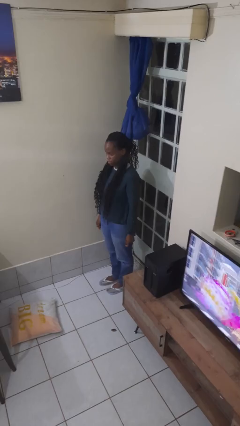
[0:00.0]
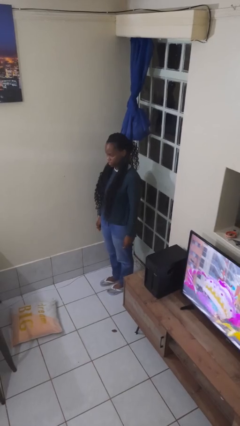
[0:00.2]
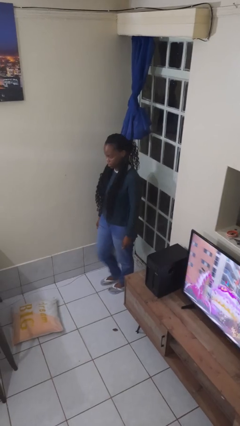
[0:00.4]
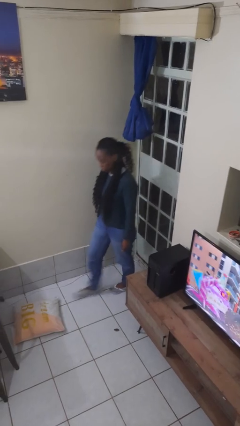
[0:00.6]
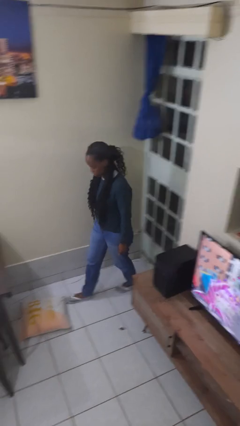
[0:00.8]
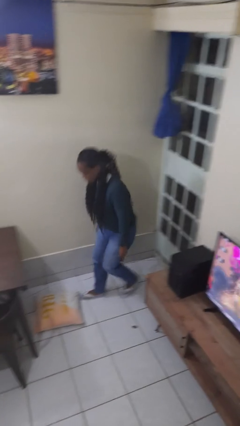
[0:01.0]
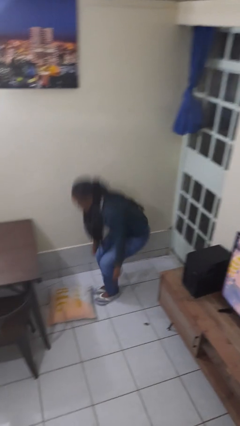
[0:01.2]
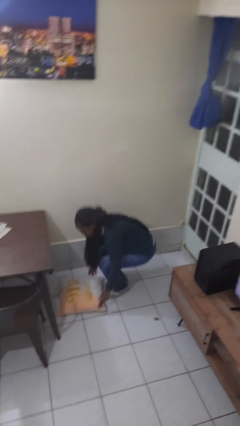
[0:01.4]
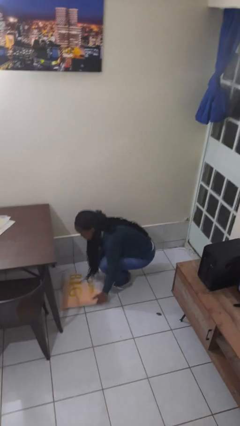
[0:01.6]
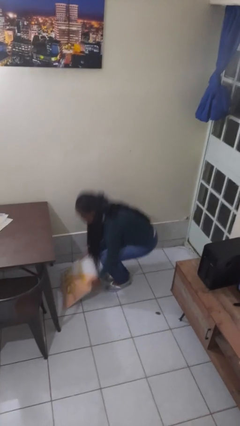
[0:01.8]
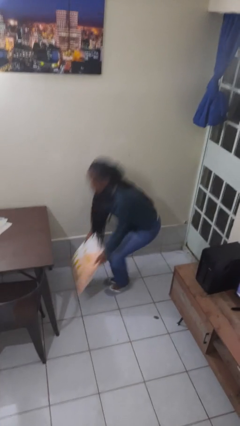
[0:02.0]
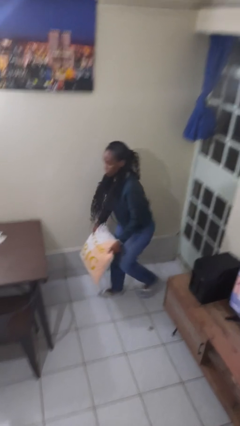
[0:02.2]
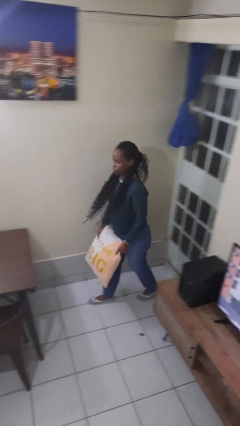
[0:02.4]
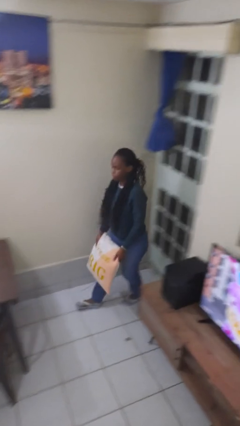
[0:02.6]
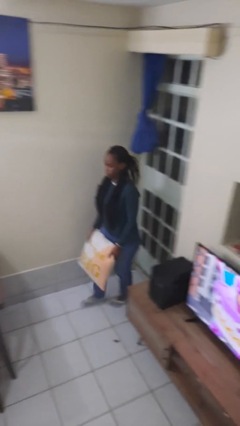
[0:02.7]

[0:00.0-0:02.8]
person picks up object from floor

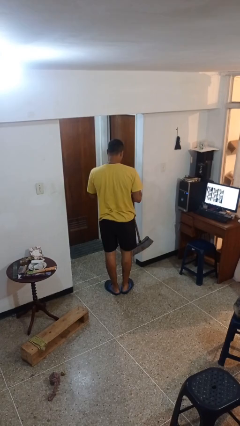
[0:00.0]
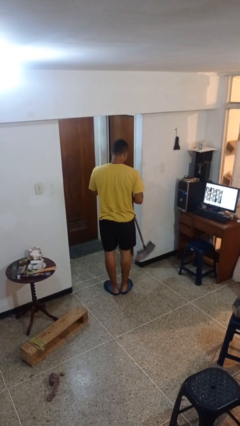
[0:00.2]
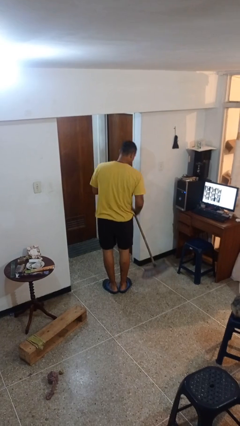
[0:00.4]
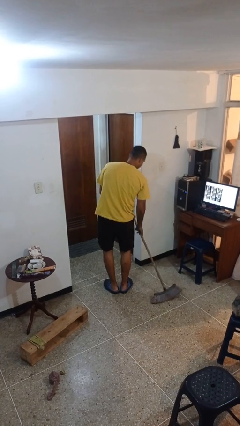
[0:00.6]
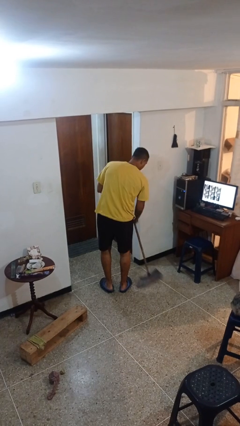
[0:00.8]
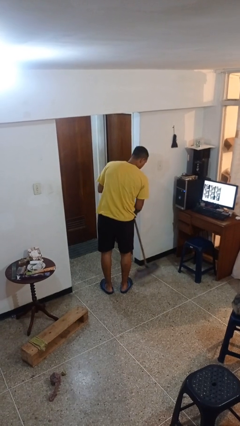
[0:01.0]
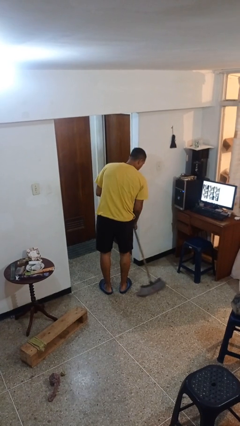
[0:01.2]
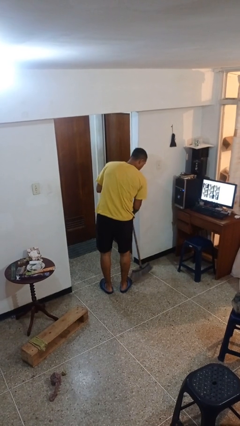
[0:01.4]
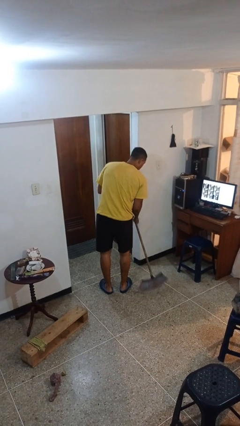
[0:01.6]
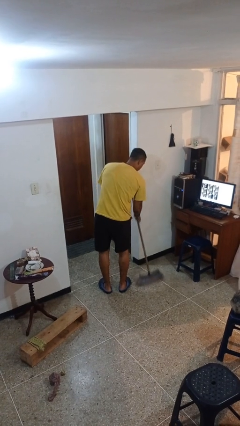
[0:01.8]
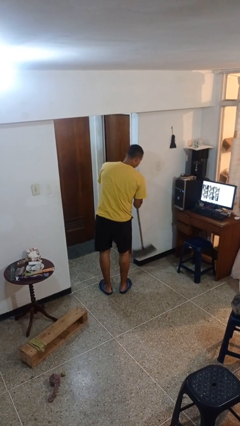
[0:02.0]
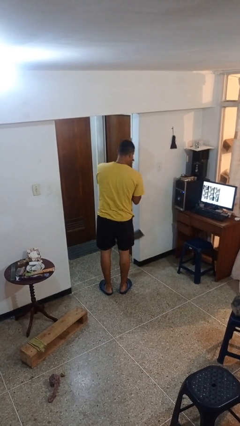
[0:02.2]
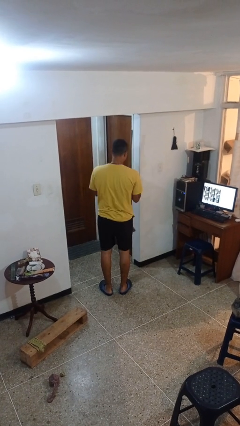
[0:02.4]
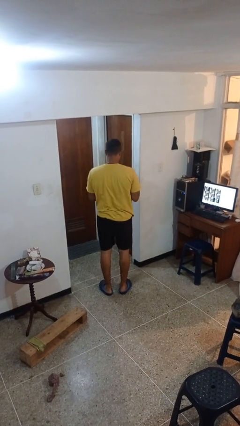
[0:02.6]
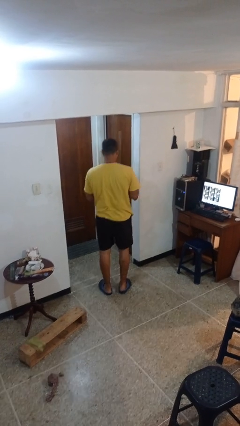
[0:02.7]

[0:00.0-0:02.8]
person sweeps floor

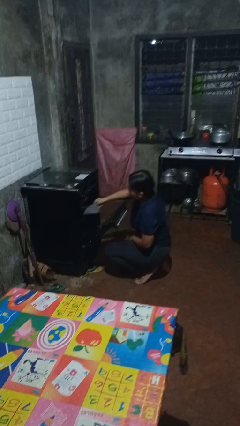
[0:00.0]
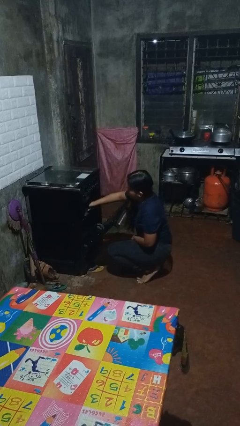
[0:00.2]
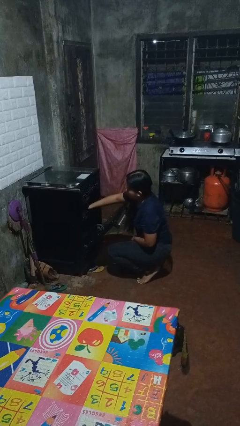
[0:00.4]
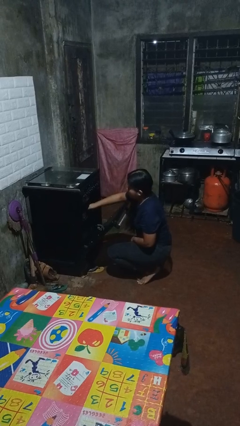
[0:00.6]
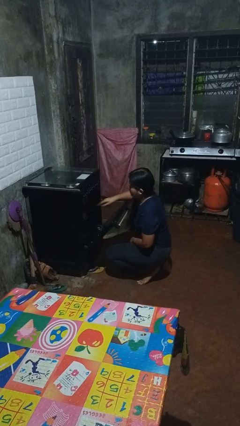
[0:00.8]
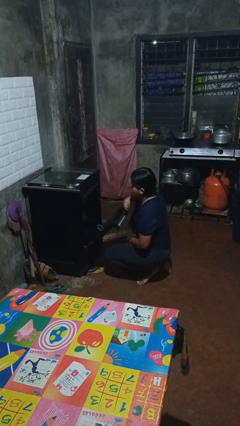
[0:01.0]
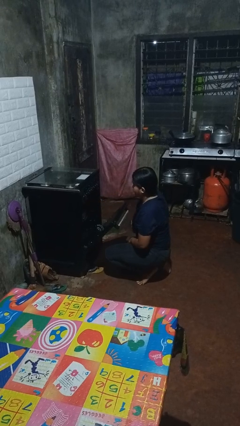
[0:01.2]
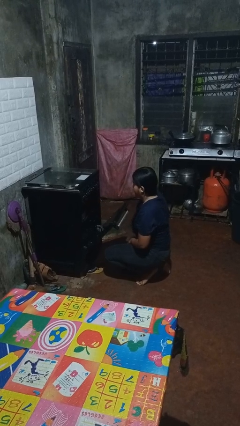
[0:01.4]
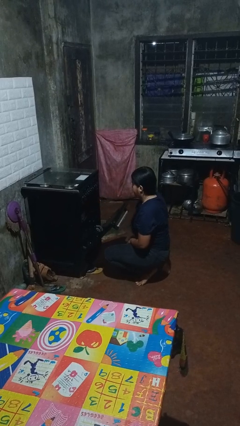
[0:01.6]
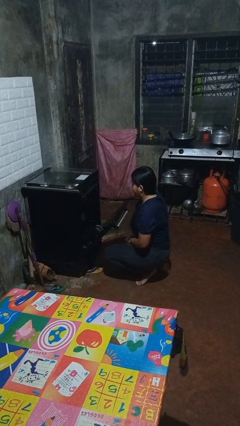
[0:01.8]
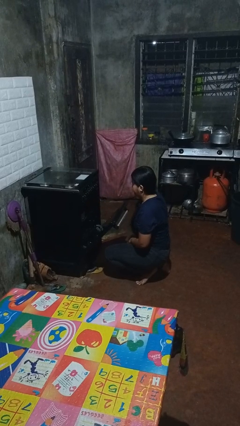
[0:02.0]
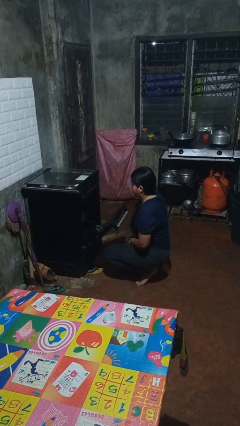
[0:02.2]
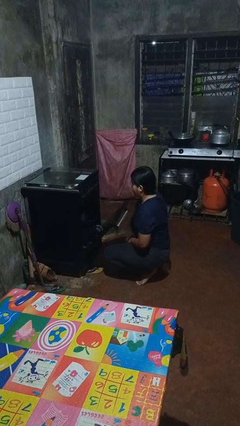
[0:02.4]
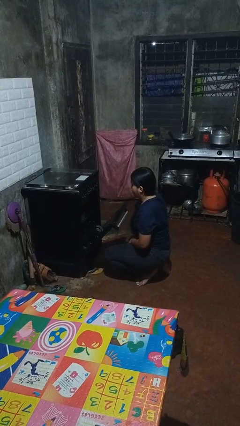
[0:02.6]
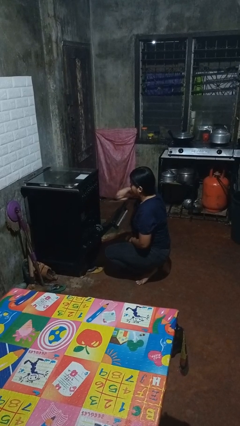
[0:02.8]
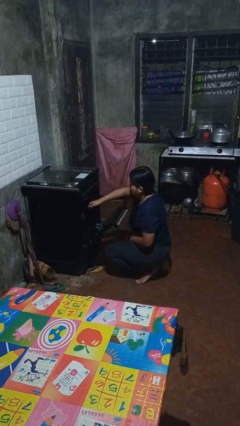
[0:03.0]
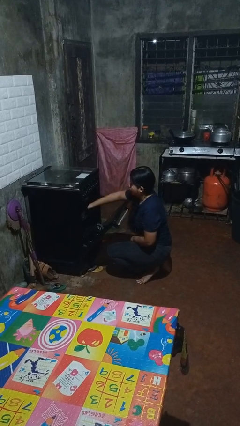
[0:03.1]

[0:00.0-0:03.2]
person puts object into oven

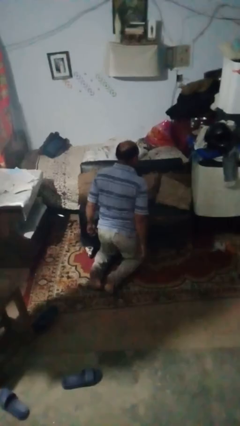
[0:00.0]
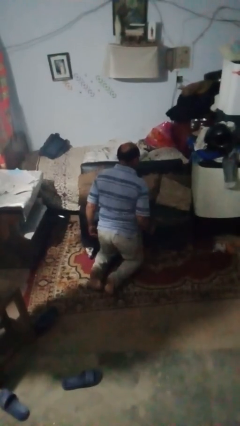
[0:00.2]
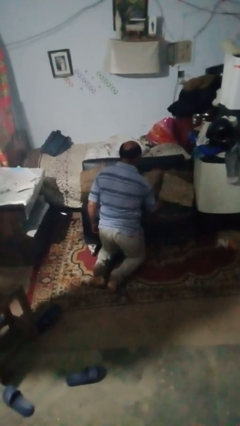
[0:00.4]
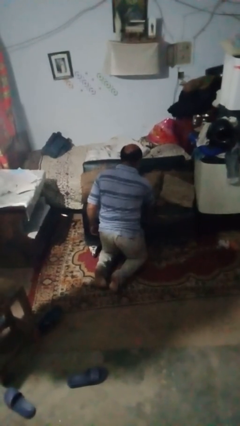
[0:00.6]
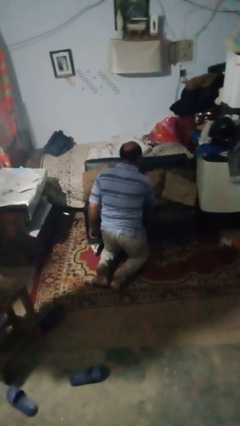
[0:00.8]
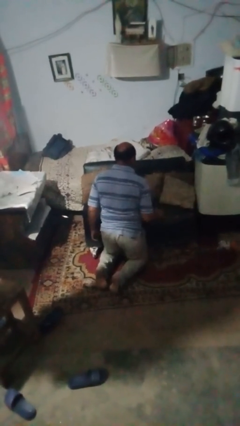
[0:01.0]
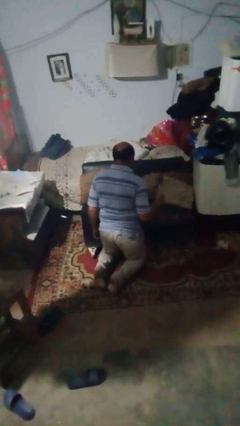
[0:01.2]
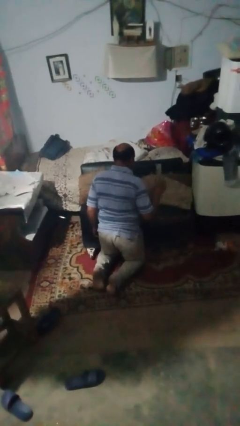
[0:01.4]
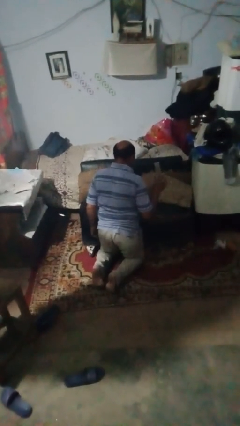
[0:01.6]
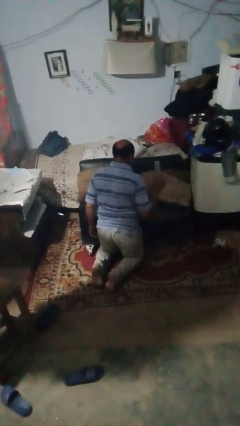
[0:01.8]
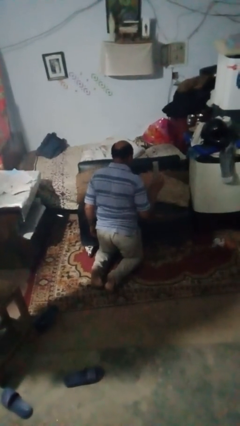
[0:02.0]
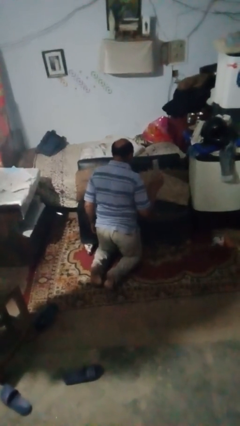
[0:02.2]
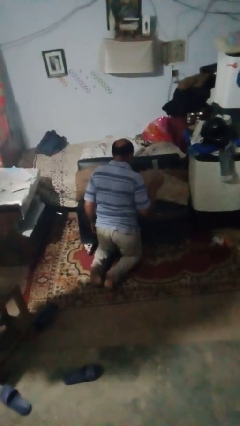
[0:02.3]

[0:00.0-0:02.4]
person searches in couch

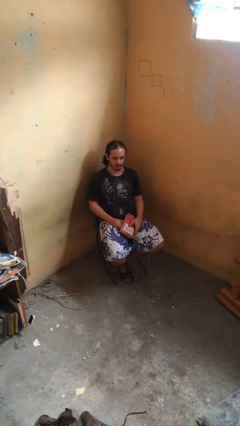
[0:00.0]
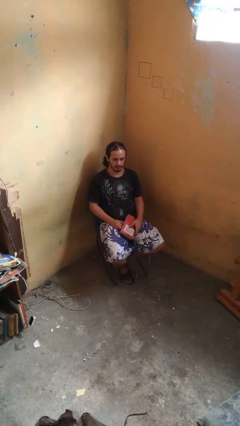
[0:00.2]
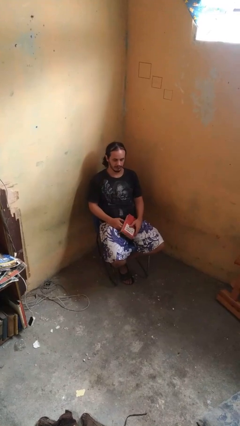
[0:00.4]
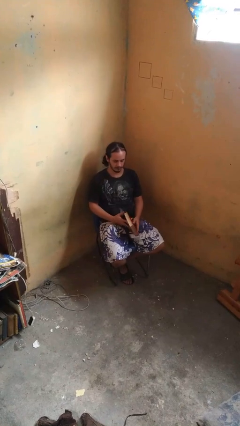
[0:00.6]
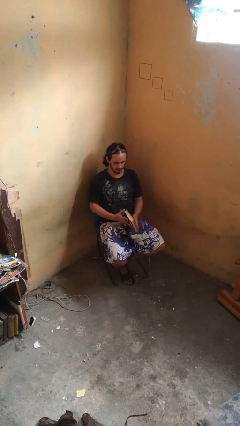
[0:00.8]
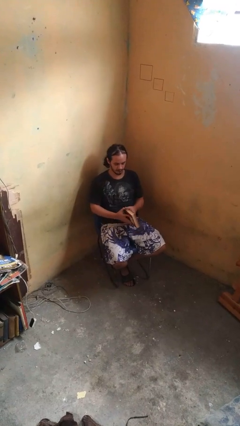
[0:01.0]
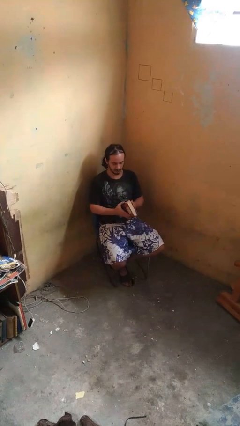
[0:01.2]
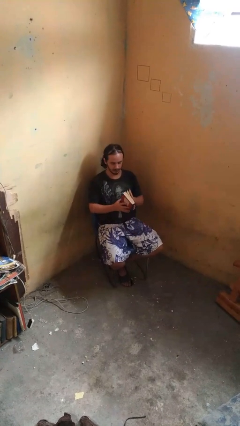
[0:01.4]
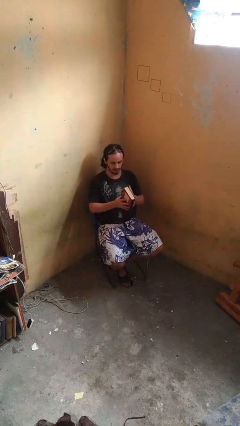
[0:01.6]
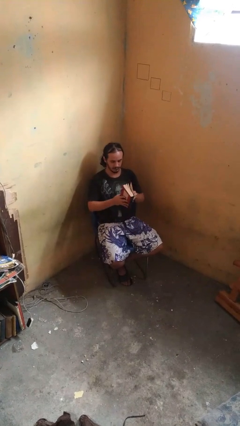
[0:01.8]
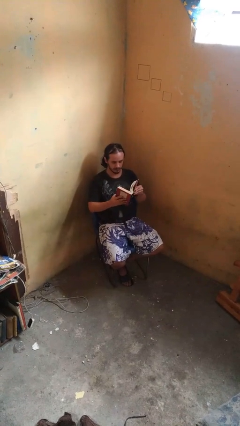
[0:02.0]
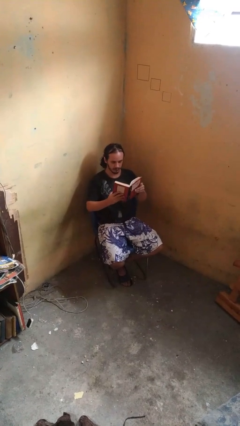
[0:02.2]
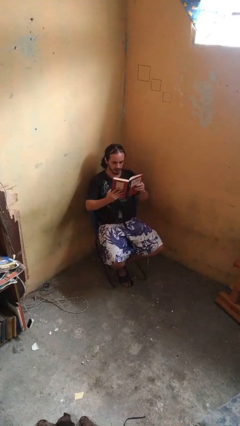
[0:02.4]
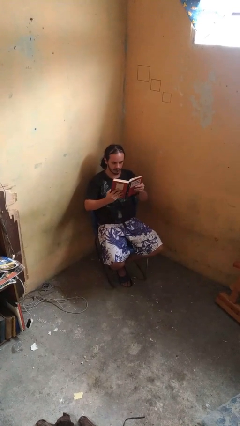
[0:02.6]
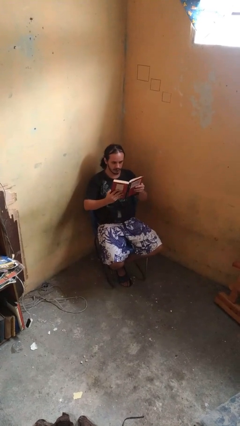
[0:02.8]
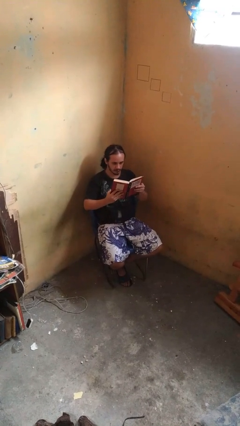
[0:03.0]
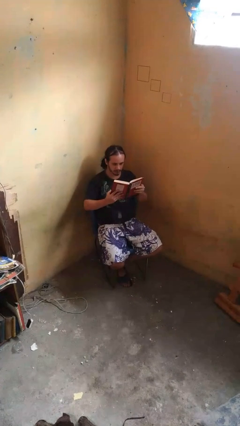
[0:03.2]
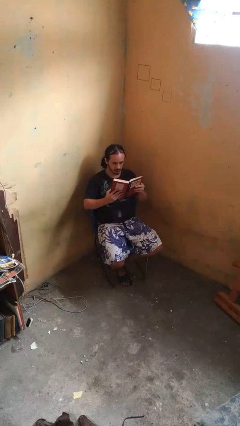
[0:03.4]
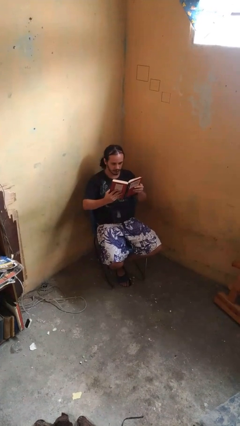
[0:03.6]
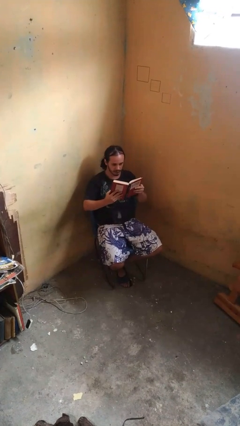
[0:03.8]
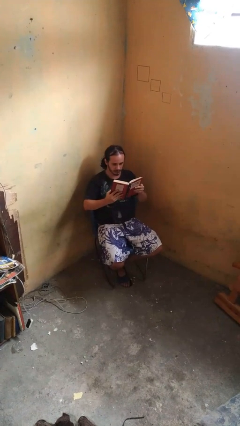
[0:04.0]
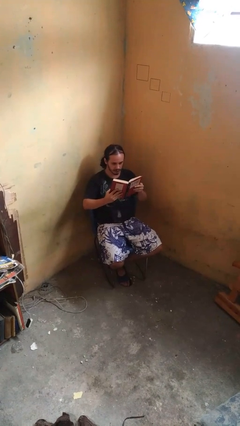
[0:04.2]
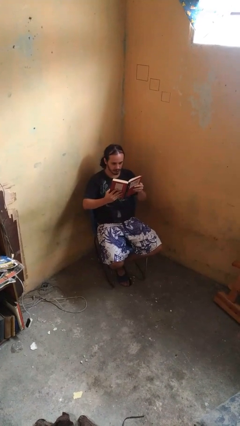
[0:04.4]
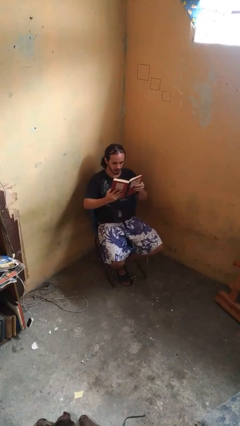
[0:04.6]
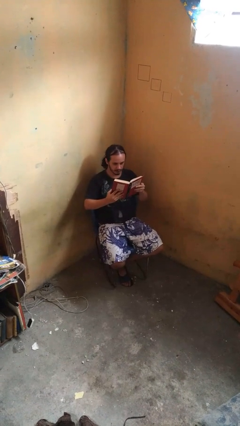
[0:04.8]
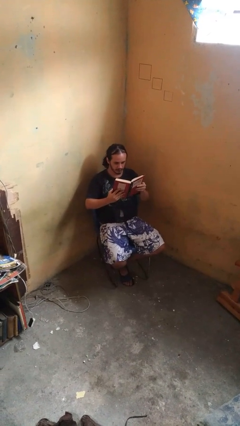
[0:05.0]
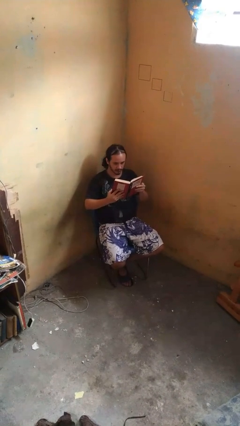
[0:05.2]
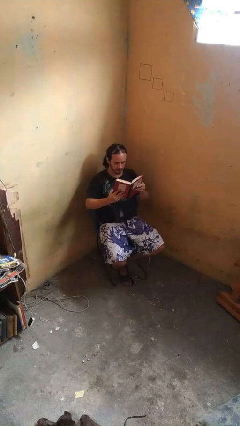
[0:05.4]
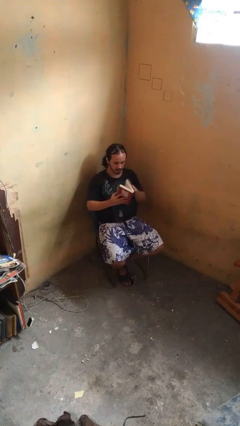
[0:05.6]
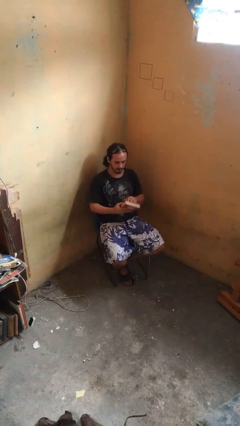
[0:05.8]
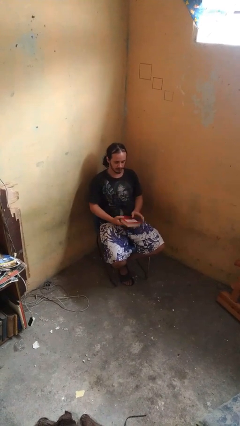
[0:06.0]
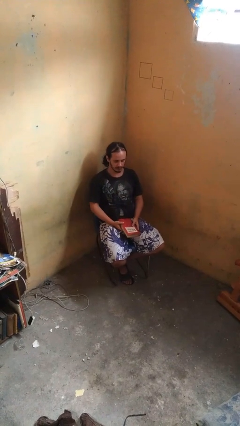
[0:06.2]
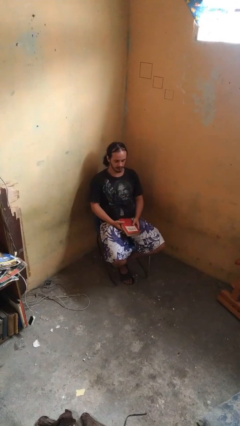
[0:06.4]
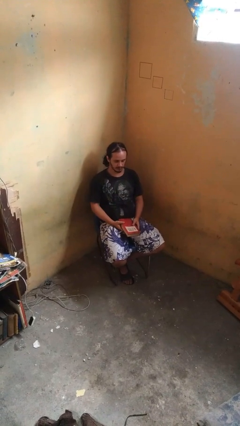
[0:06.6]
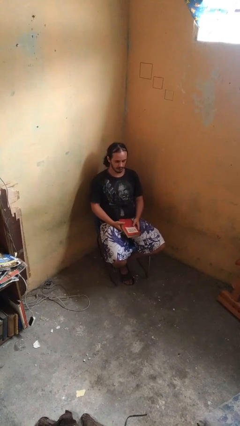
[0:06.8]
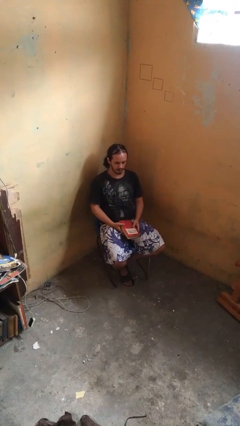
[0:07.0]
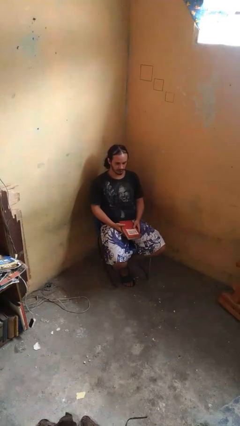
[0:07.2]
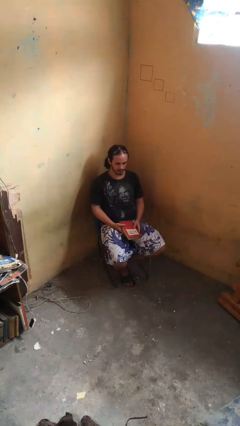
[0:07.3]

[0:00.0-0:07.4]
person reads book
